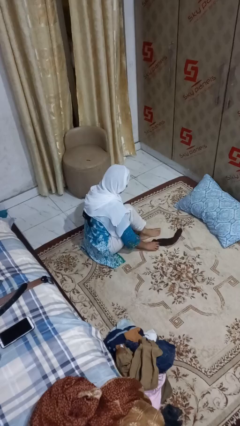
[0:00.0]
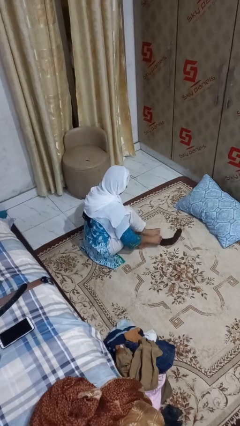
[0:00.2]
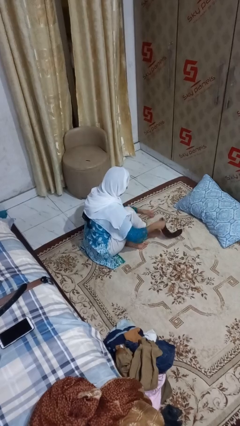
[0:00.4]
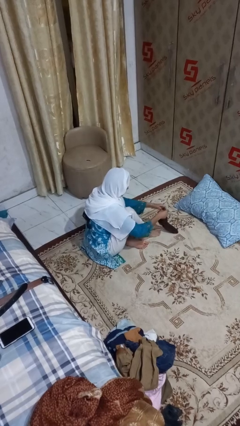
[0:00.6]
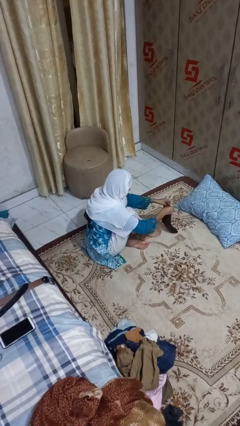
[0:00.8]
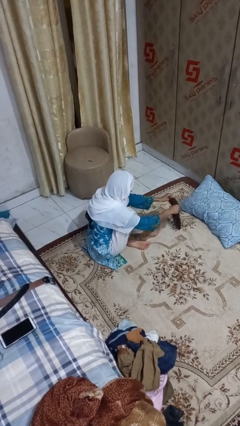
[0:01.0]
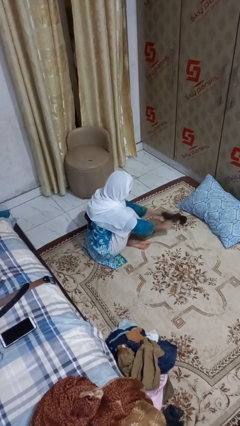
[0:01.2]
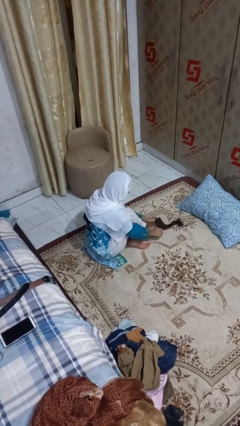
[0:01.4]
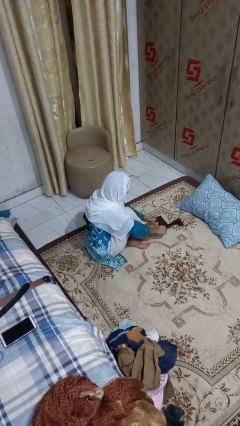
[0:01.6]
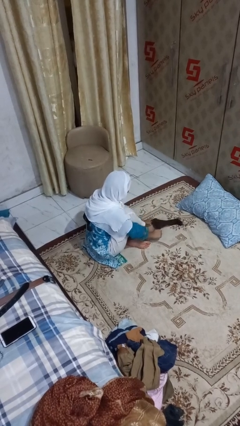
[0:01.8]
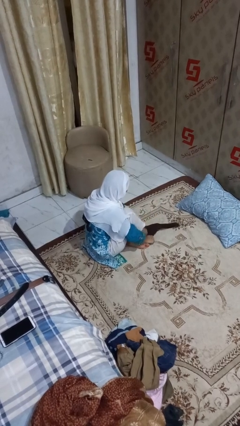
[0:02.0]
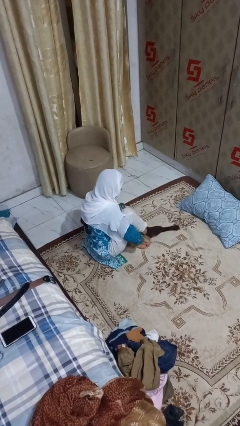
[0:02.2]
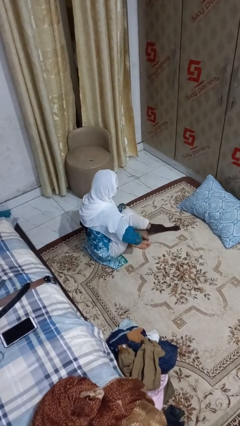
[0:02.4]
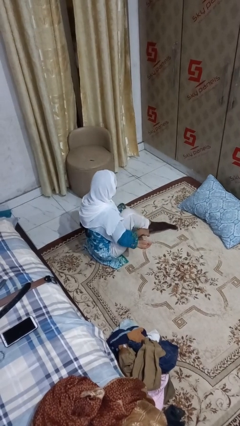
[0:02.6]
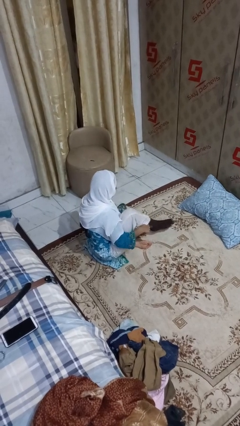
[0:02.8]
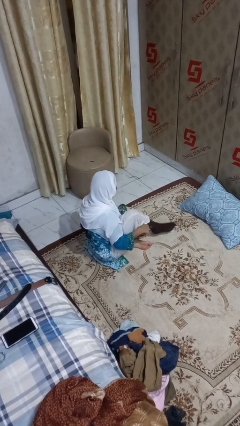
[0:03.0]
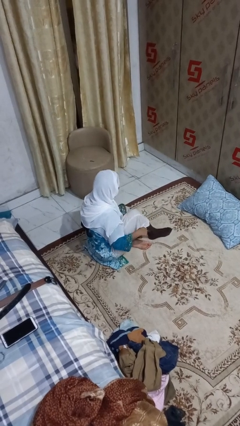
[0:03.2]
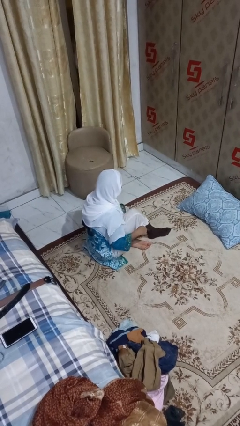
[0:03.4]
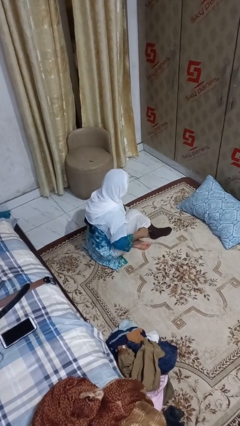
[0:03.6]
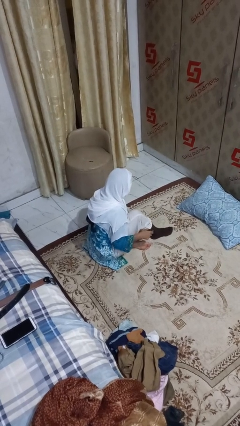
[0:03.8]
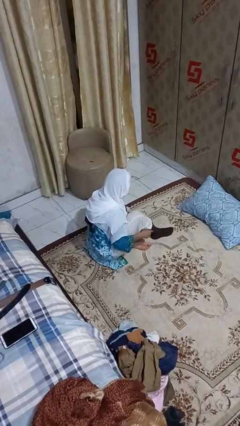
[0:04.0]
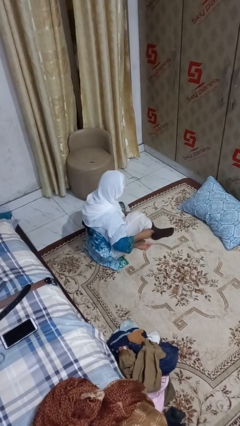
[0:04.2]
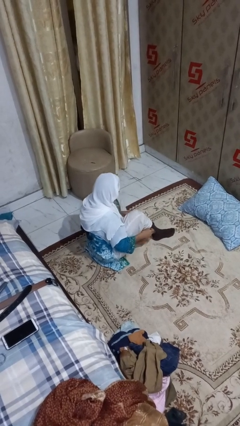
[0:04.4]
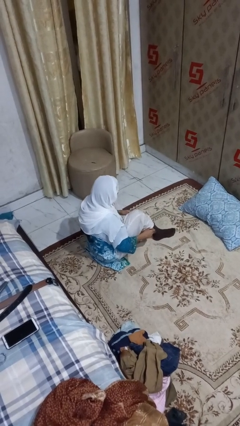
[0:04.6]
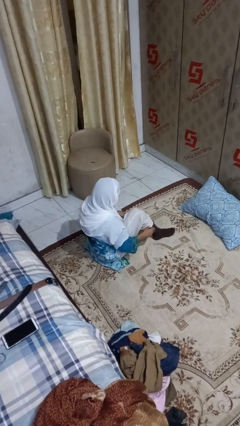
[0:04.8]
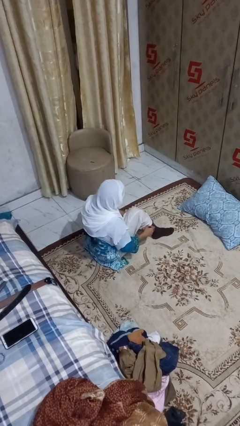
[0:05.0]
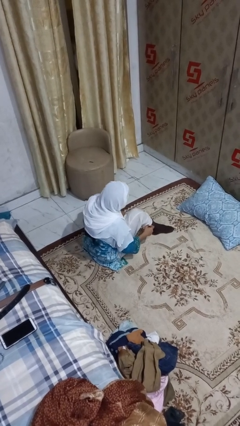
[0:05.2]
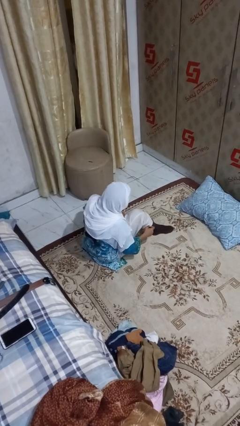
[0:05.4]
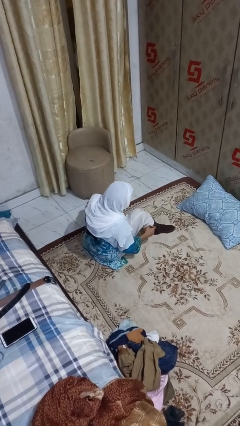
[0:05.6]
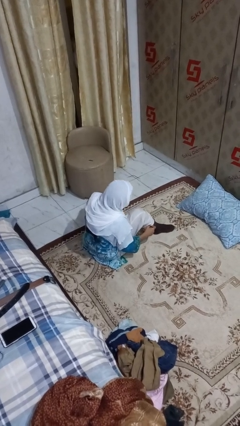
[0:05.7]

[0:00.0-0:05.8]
person puts on socks

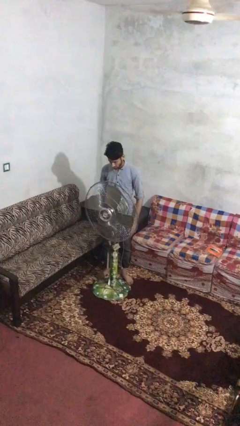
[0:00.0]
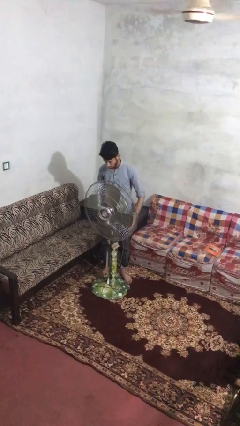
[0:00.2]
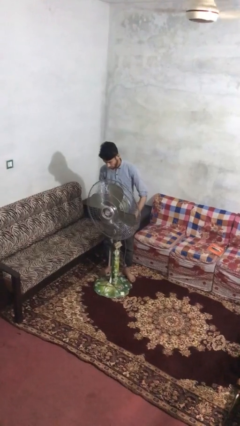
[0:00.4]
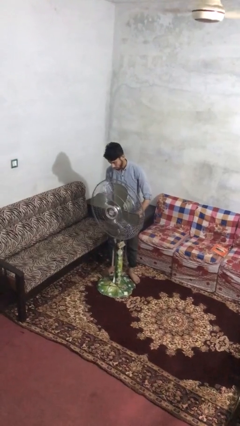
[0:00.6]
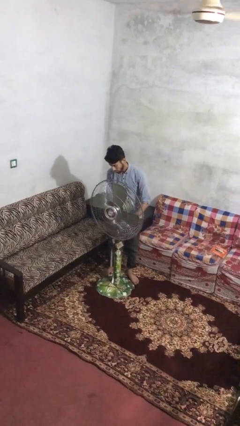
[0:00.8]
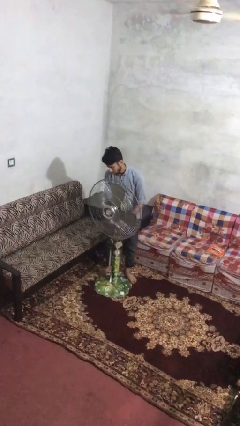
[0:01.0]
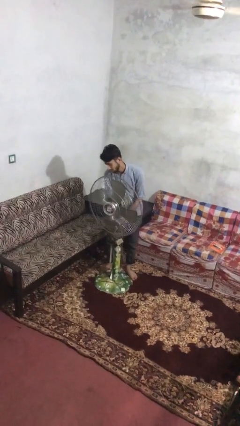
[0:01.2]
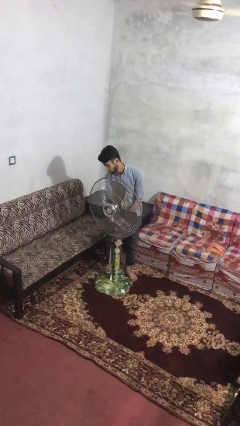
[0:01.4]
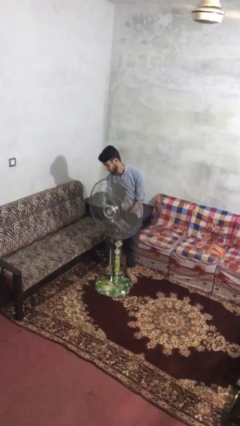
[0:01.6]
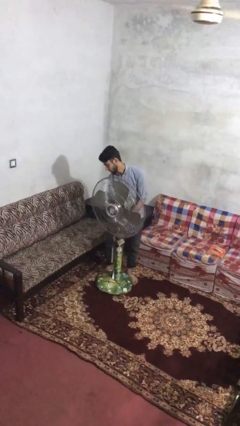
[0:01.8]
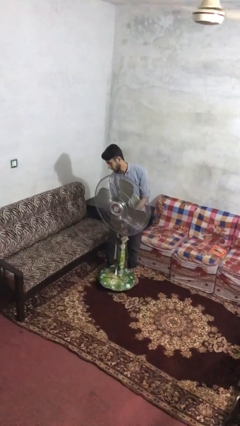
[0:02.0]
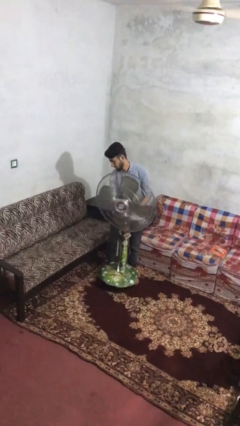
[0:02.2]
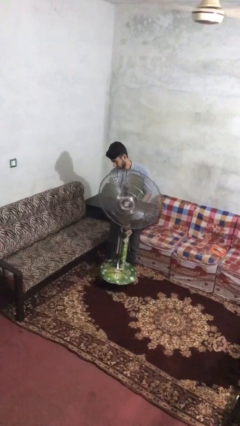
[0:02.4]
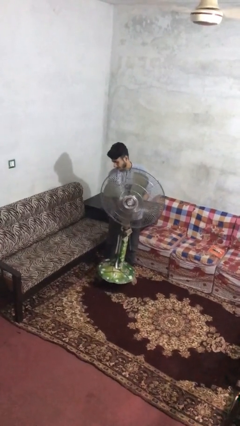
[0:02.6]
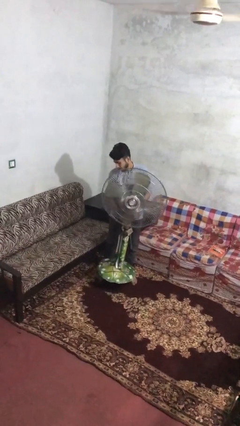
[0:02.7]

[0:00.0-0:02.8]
person picks up object from floor

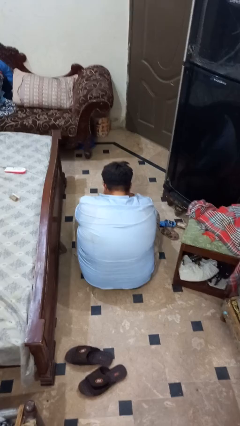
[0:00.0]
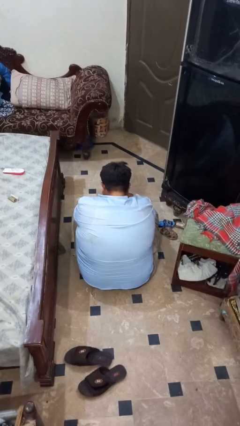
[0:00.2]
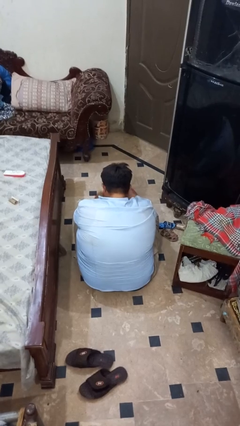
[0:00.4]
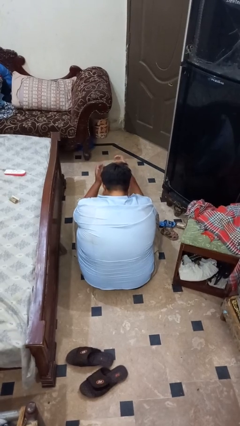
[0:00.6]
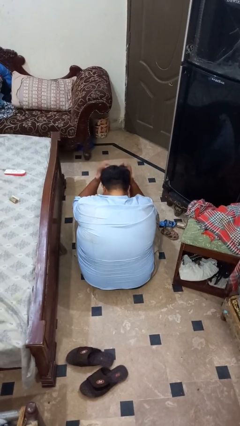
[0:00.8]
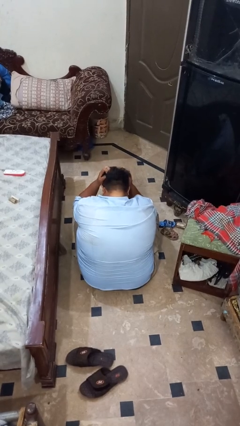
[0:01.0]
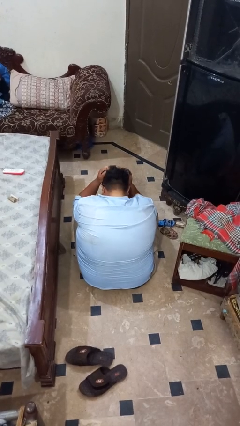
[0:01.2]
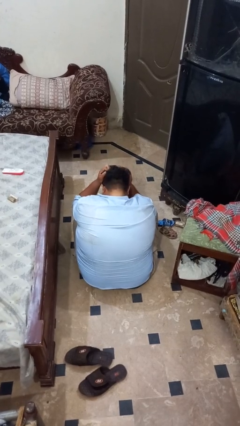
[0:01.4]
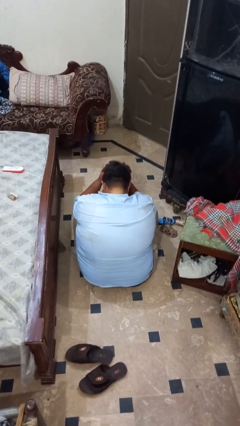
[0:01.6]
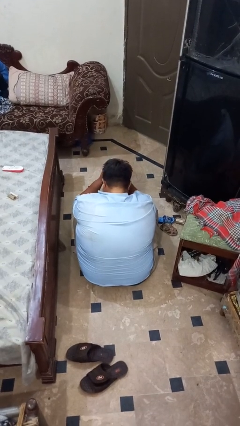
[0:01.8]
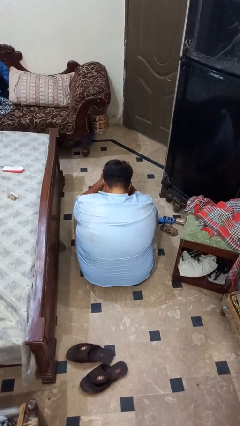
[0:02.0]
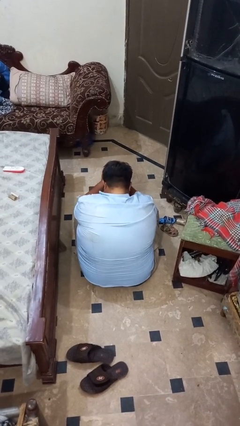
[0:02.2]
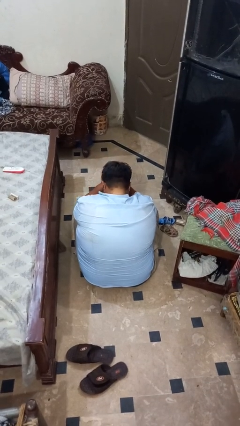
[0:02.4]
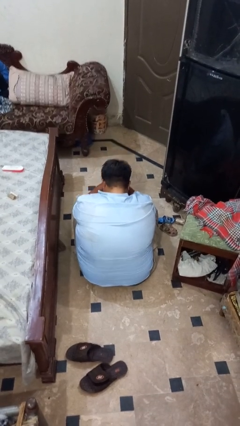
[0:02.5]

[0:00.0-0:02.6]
person strokes hair

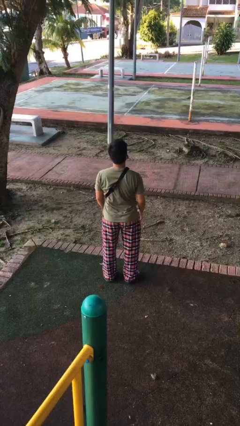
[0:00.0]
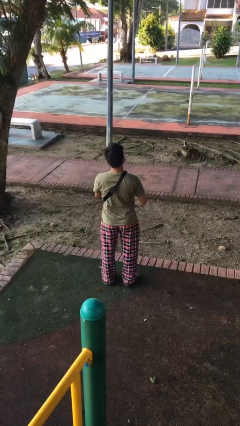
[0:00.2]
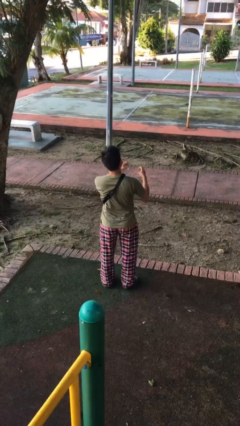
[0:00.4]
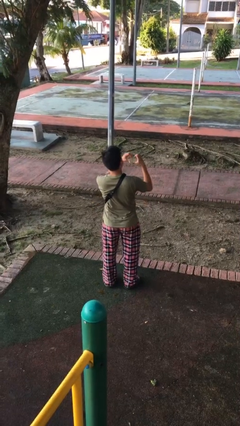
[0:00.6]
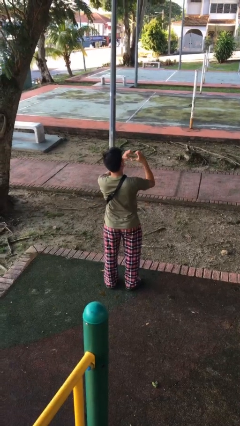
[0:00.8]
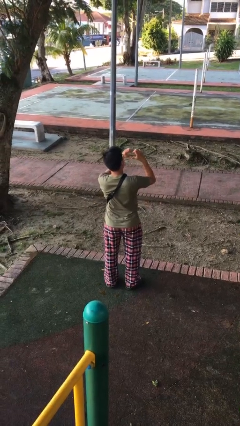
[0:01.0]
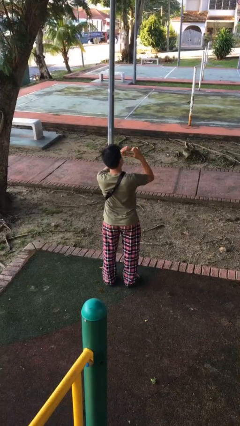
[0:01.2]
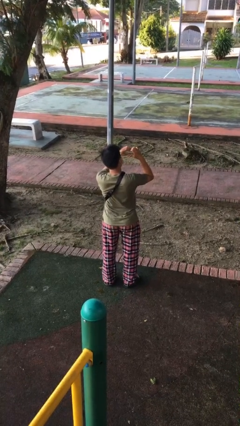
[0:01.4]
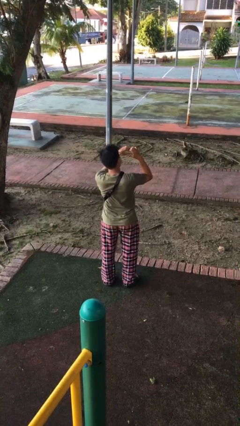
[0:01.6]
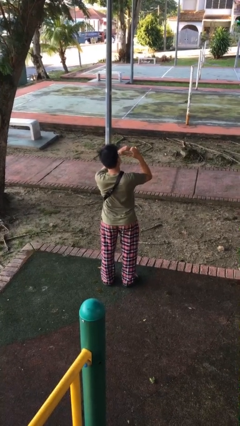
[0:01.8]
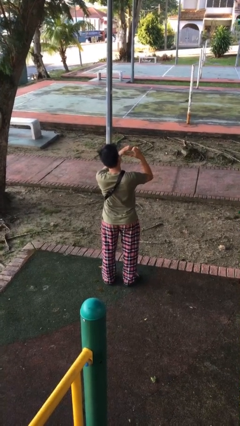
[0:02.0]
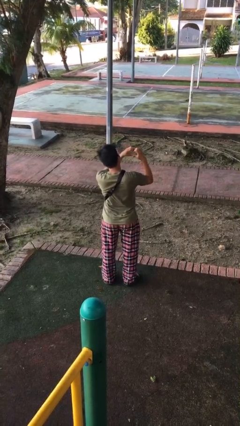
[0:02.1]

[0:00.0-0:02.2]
person gestures heart

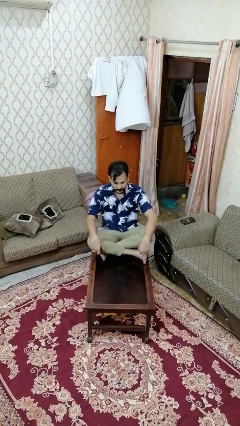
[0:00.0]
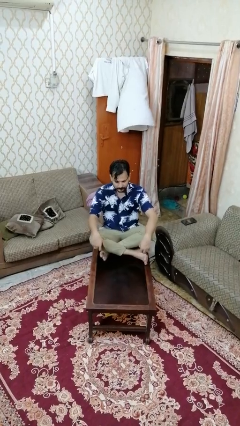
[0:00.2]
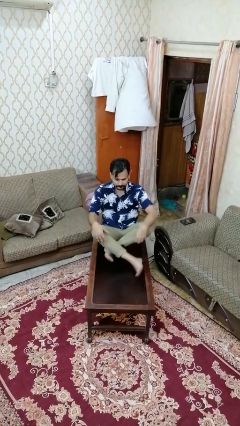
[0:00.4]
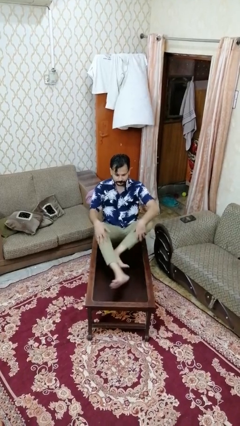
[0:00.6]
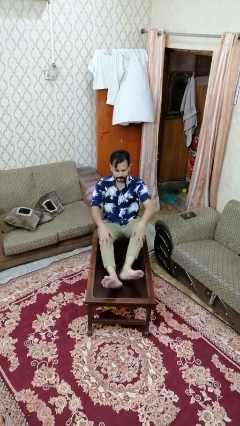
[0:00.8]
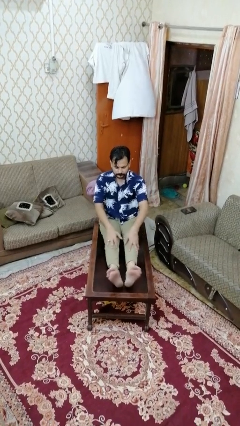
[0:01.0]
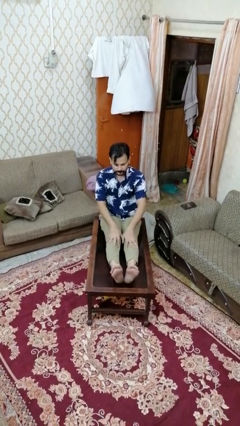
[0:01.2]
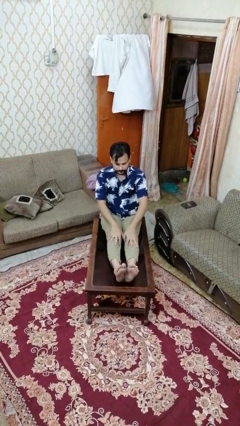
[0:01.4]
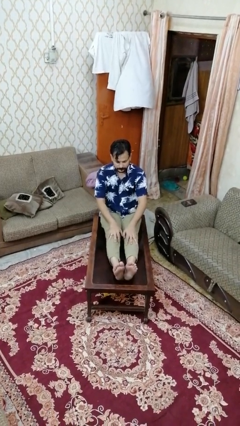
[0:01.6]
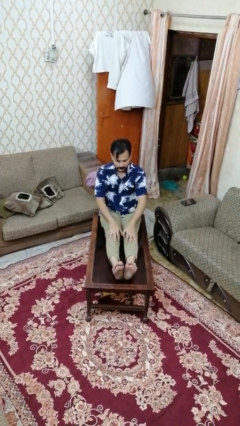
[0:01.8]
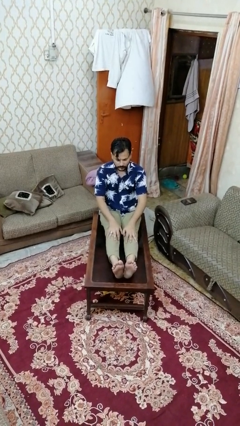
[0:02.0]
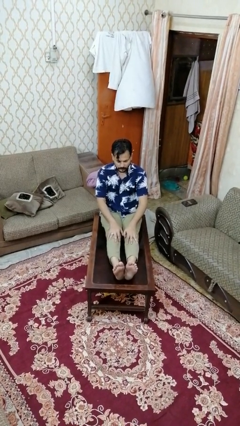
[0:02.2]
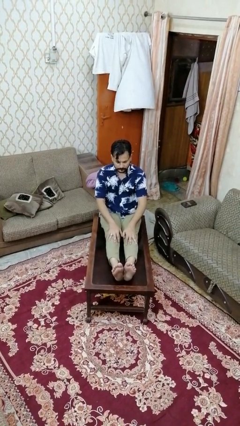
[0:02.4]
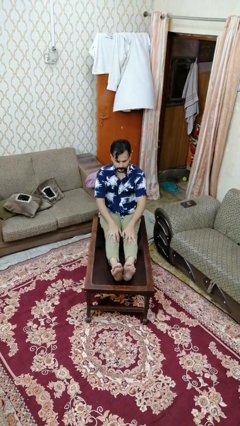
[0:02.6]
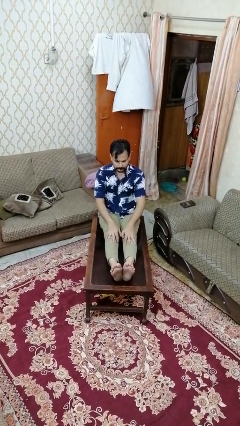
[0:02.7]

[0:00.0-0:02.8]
person puts feet up

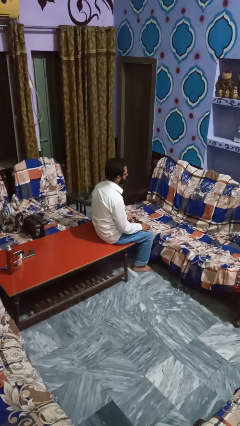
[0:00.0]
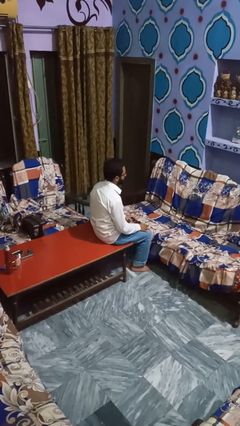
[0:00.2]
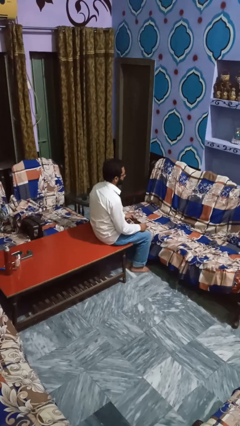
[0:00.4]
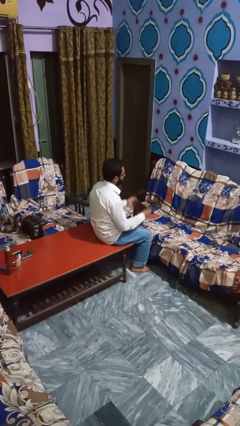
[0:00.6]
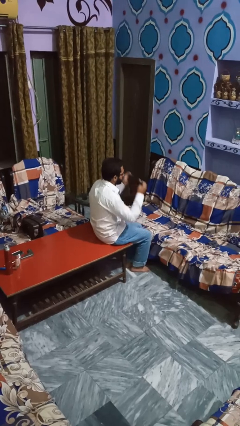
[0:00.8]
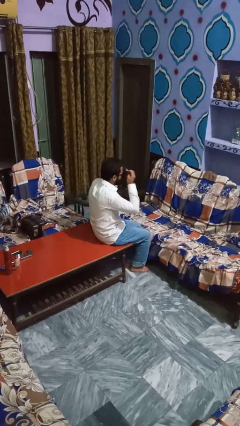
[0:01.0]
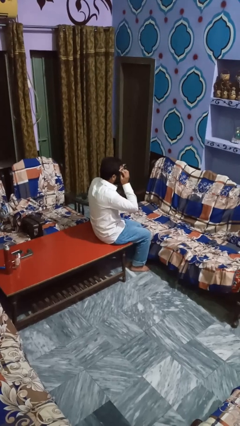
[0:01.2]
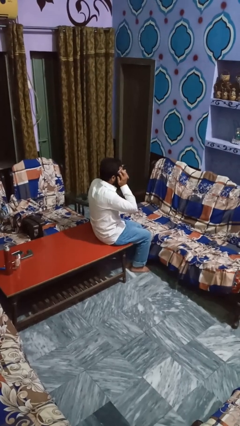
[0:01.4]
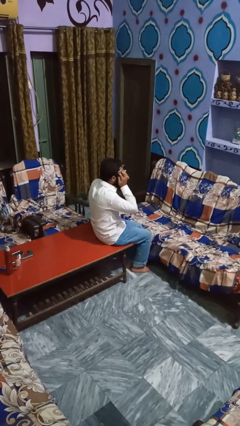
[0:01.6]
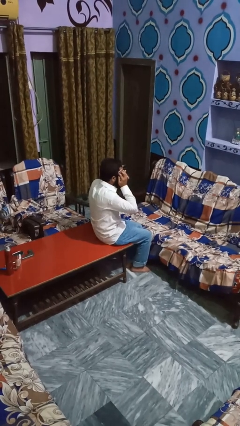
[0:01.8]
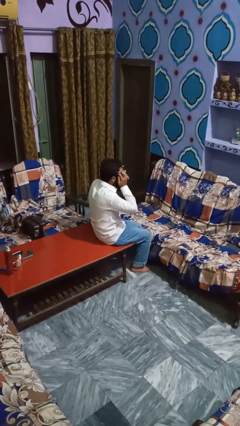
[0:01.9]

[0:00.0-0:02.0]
person yawns
